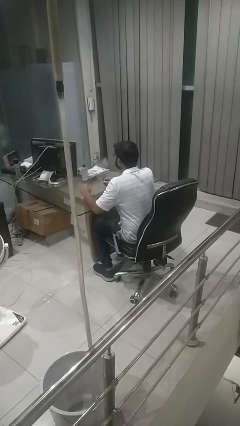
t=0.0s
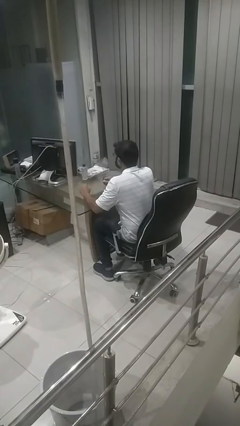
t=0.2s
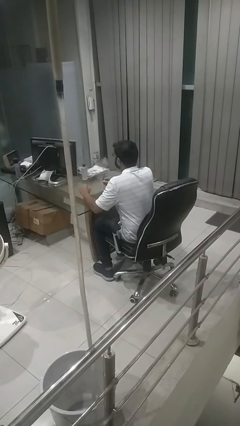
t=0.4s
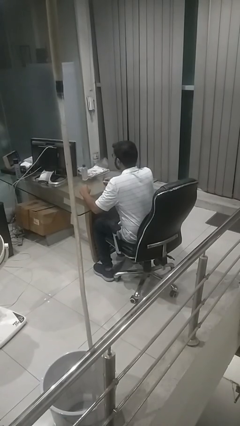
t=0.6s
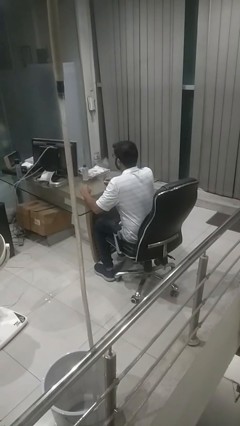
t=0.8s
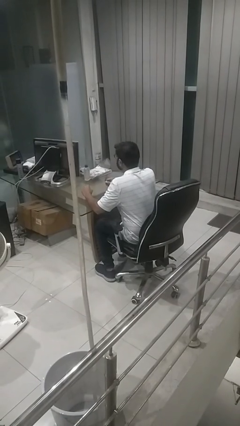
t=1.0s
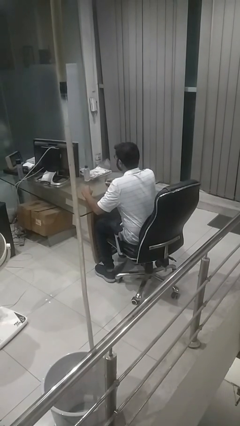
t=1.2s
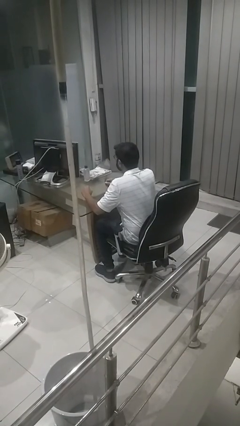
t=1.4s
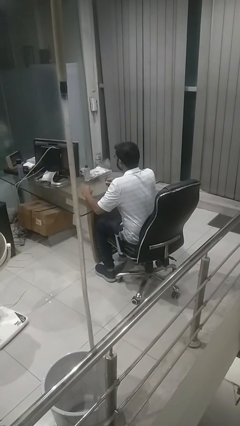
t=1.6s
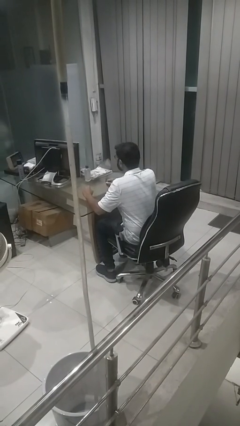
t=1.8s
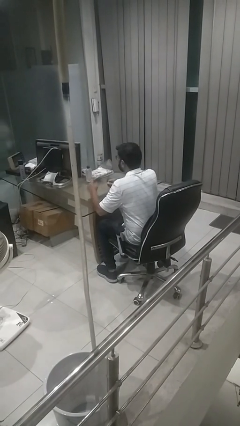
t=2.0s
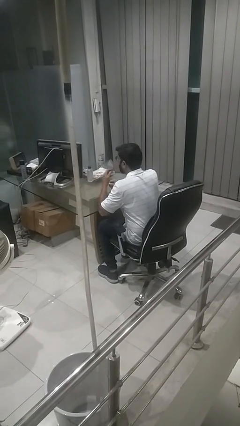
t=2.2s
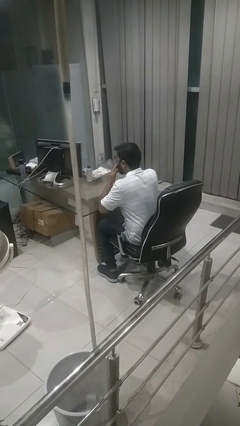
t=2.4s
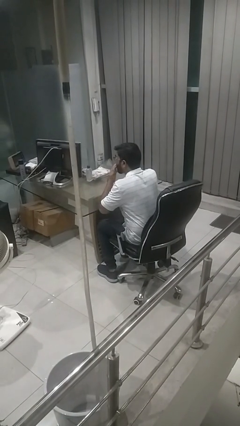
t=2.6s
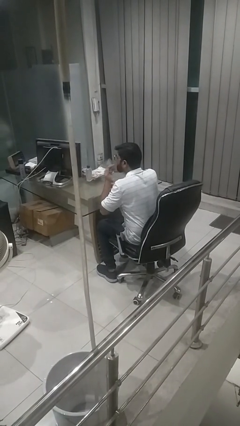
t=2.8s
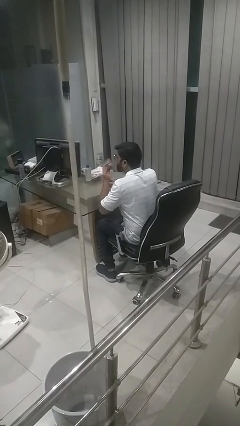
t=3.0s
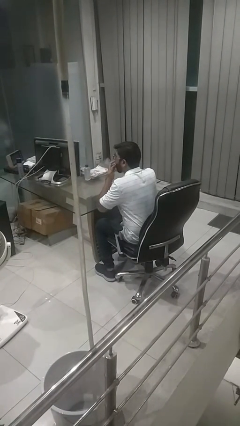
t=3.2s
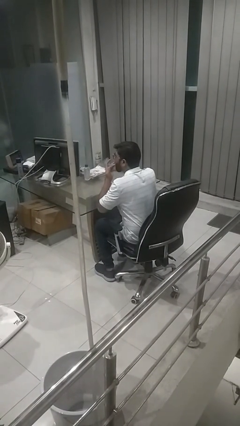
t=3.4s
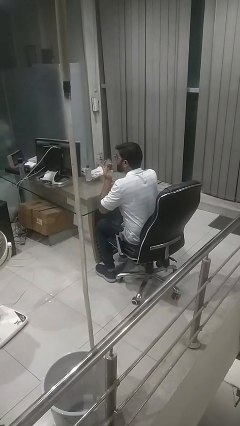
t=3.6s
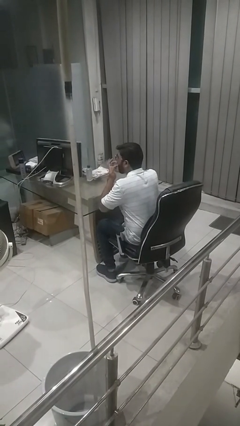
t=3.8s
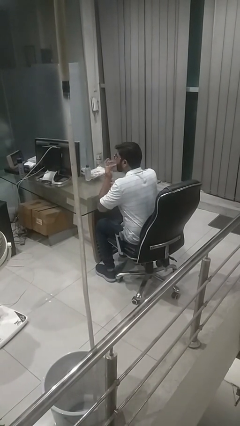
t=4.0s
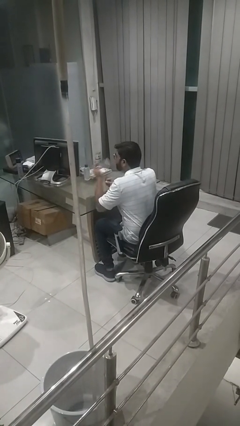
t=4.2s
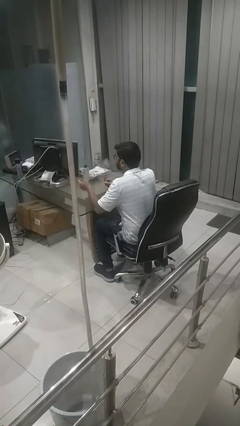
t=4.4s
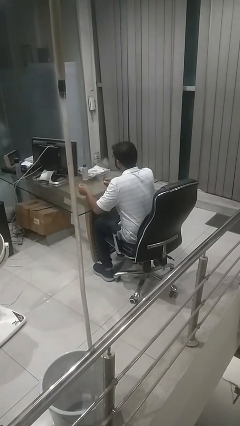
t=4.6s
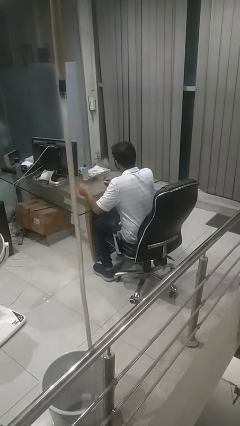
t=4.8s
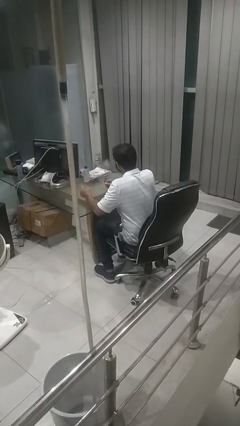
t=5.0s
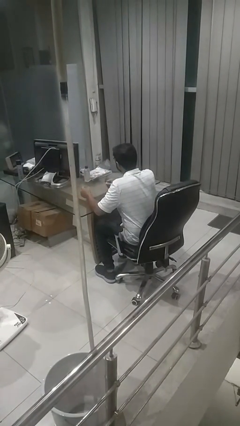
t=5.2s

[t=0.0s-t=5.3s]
person licks fingers

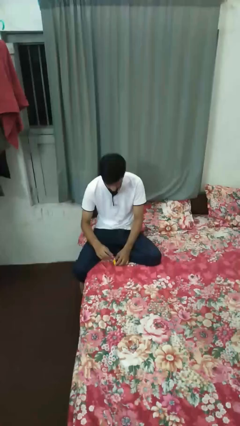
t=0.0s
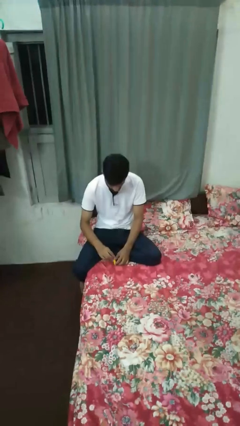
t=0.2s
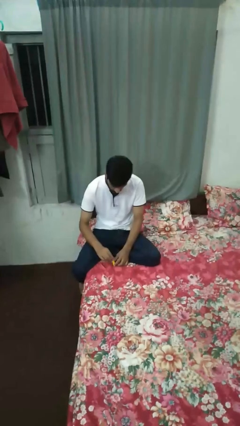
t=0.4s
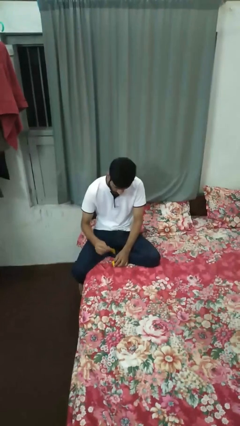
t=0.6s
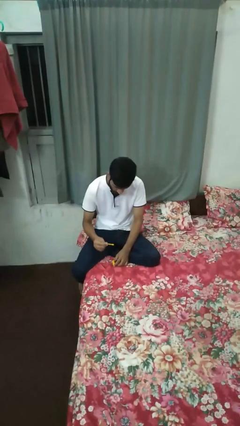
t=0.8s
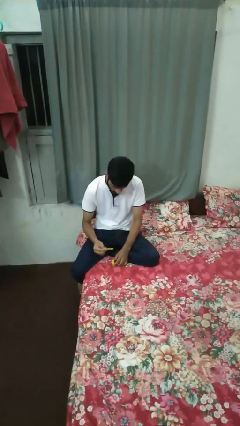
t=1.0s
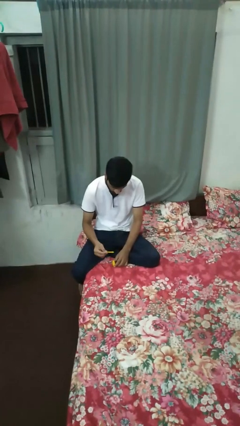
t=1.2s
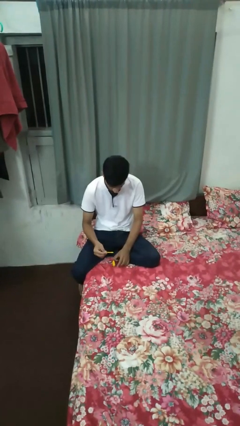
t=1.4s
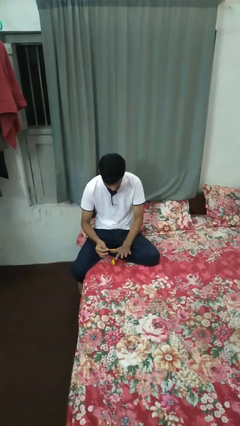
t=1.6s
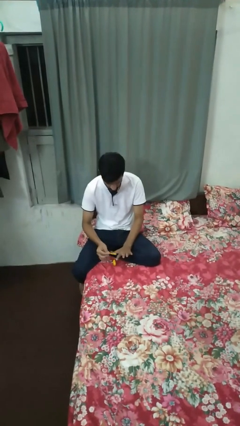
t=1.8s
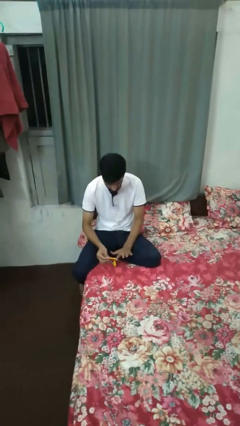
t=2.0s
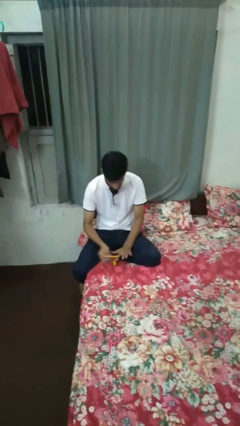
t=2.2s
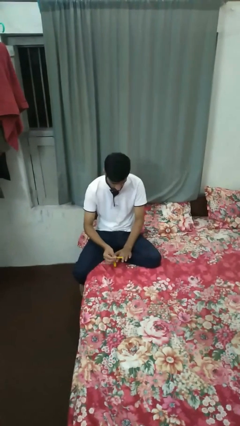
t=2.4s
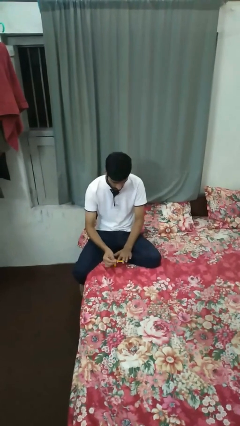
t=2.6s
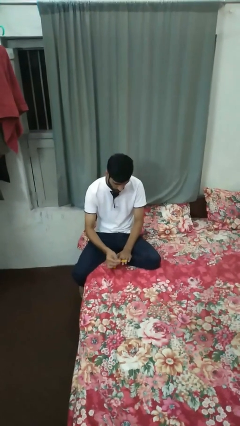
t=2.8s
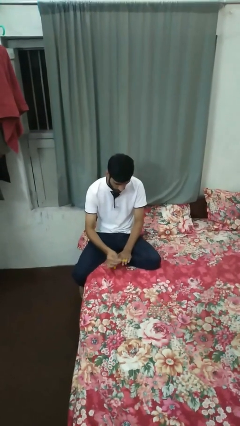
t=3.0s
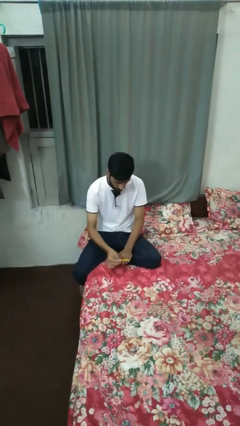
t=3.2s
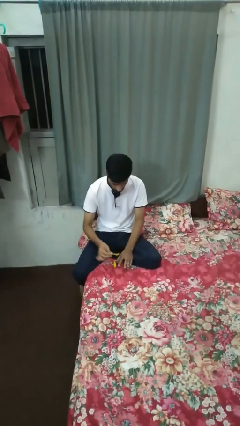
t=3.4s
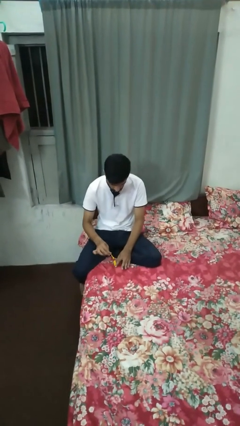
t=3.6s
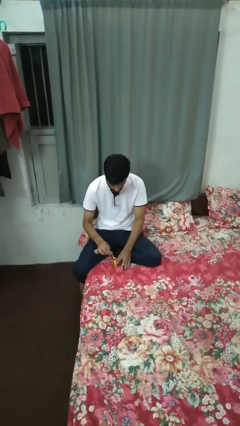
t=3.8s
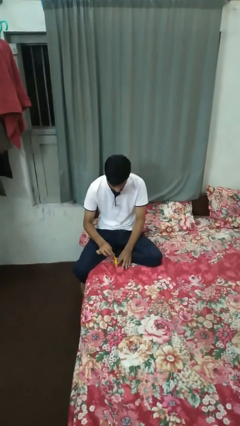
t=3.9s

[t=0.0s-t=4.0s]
person paints fingernails

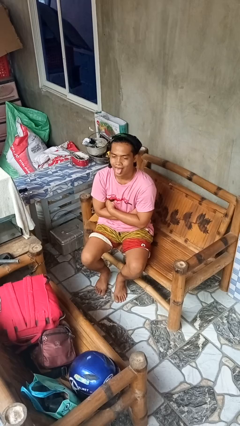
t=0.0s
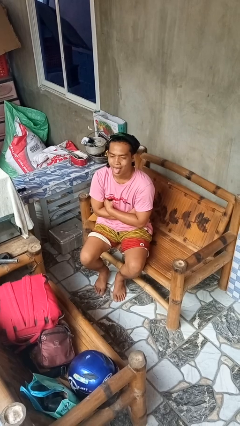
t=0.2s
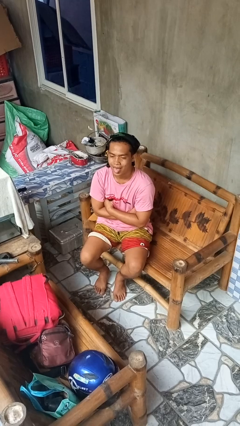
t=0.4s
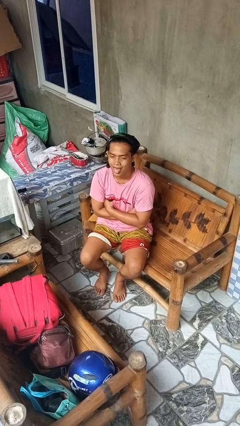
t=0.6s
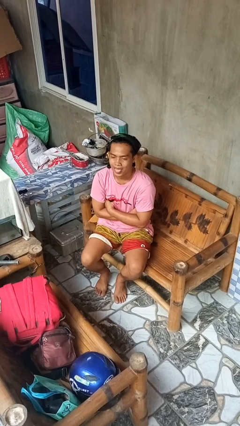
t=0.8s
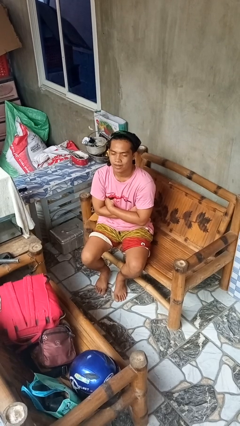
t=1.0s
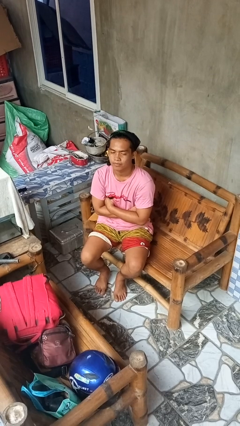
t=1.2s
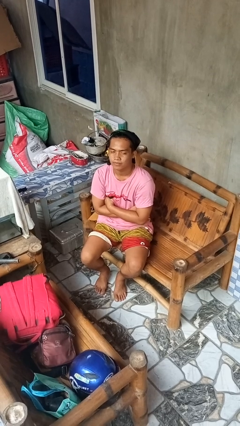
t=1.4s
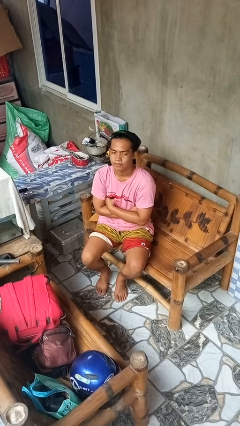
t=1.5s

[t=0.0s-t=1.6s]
person sticks out tongue

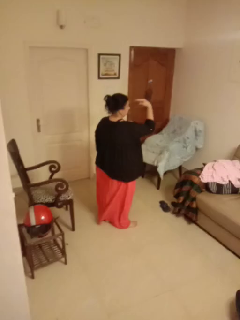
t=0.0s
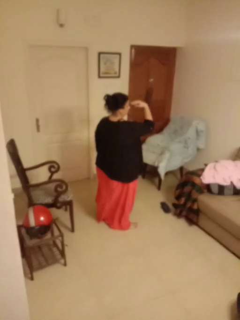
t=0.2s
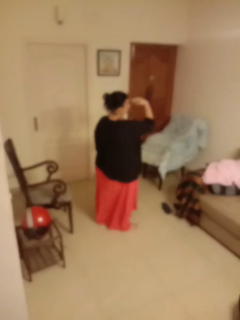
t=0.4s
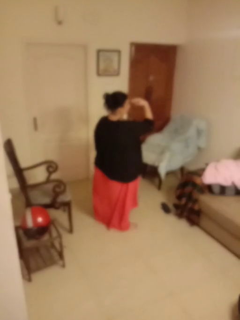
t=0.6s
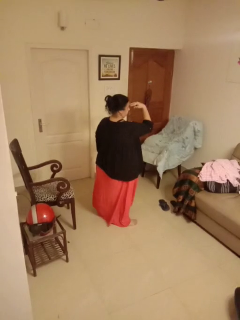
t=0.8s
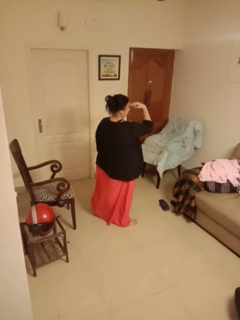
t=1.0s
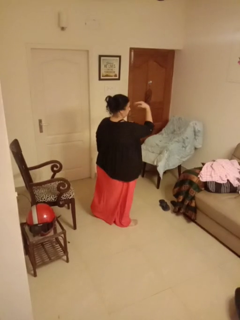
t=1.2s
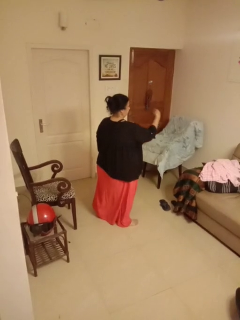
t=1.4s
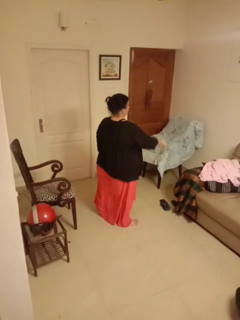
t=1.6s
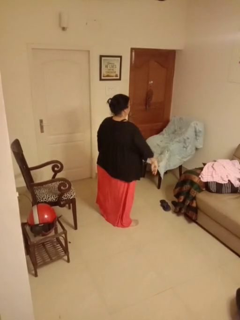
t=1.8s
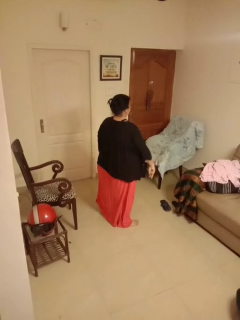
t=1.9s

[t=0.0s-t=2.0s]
person gestures watch closely

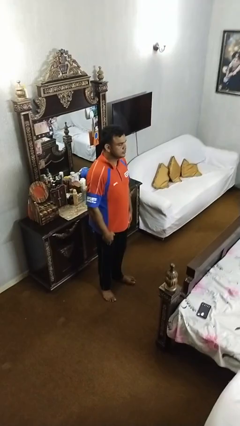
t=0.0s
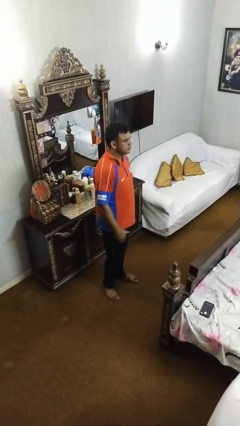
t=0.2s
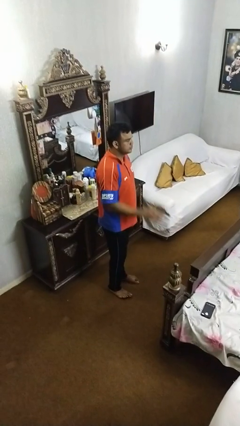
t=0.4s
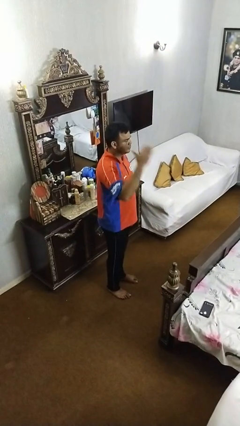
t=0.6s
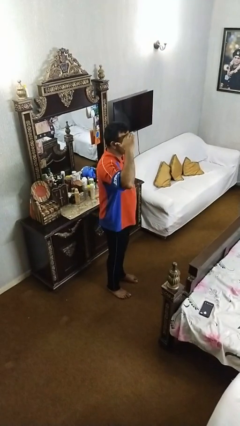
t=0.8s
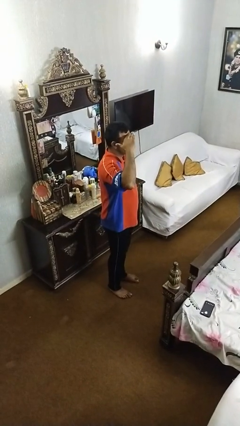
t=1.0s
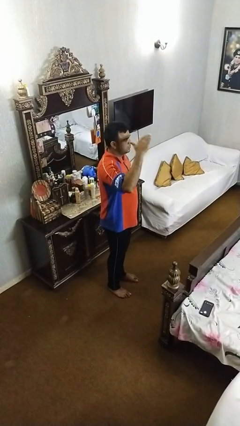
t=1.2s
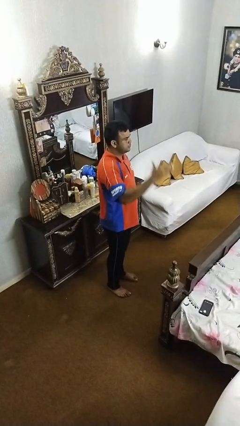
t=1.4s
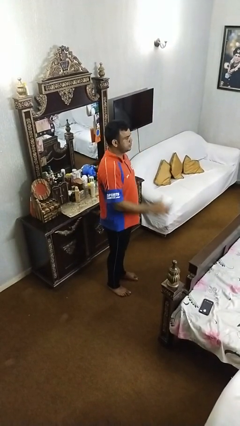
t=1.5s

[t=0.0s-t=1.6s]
person salutes

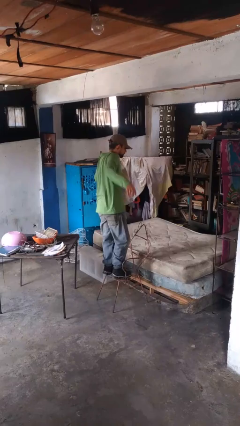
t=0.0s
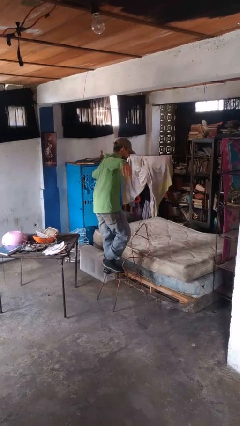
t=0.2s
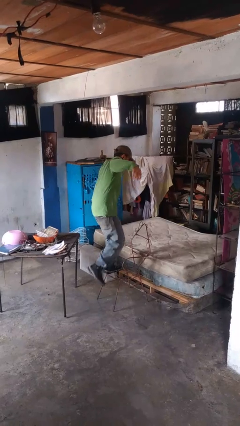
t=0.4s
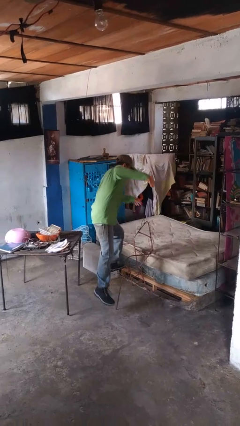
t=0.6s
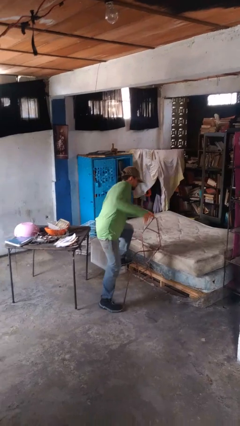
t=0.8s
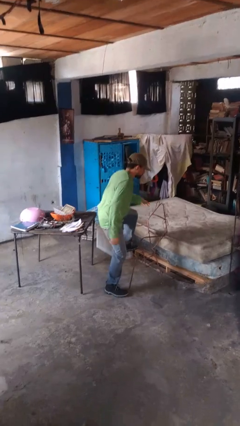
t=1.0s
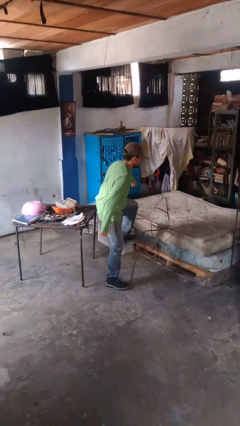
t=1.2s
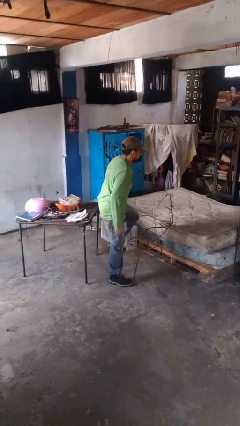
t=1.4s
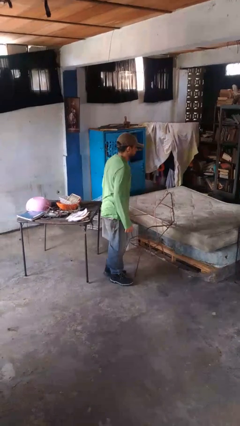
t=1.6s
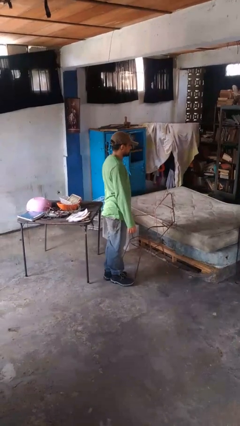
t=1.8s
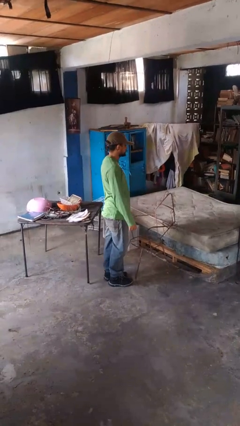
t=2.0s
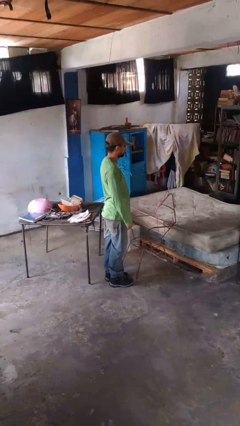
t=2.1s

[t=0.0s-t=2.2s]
person climbs off chair

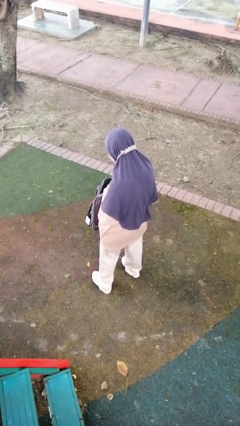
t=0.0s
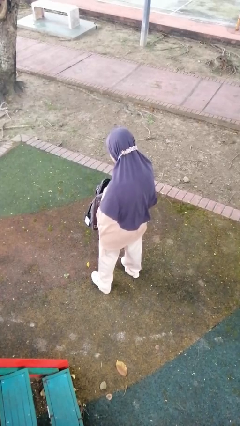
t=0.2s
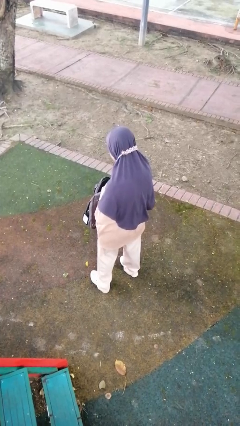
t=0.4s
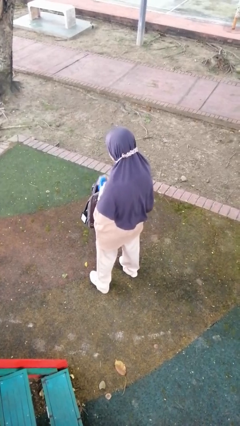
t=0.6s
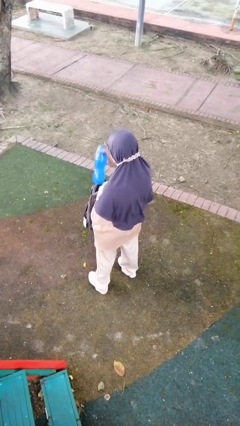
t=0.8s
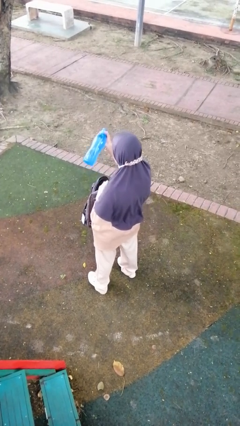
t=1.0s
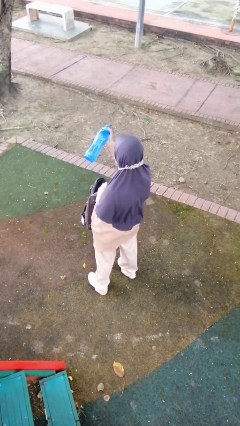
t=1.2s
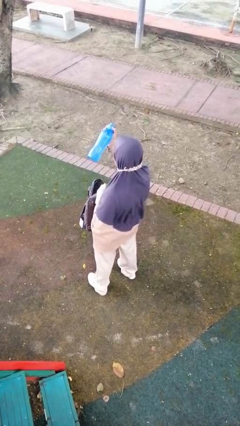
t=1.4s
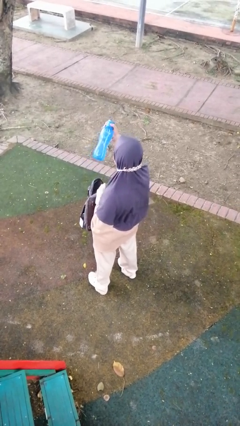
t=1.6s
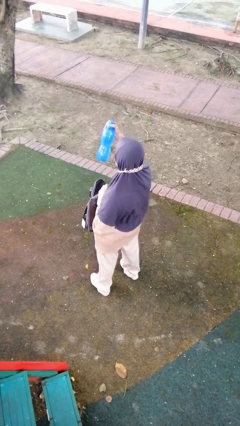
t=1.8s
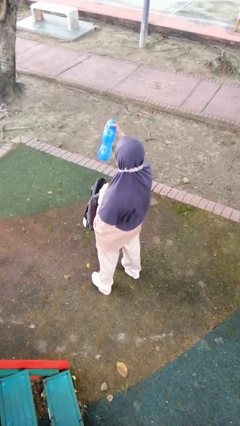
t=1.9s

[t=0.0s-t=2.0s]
person takes object from backpack
